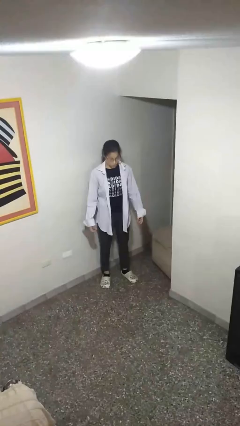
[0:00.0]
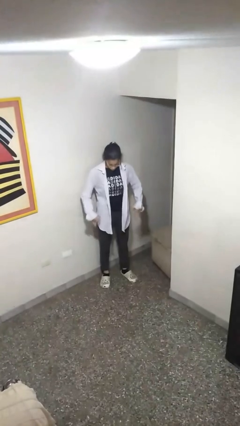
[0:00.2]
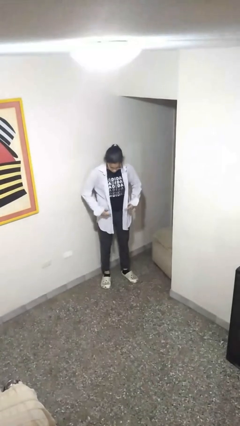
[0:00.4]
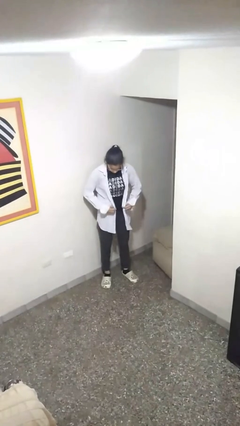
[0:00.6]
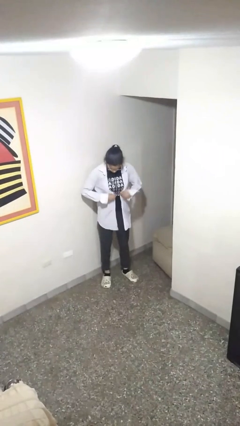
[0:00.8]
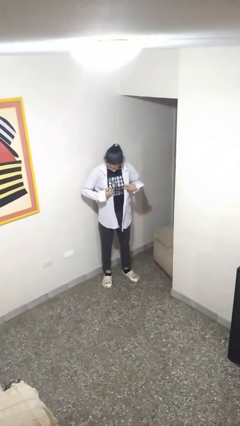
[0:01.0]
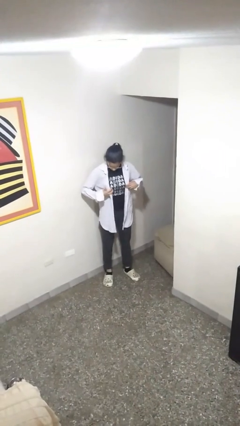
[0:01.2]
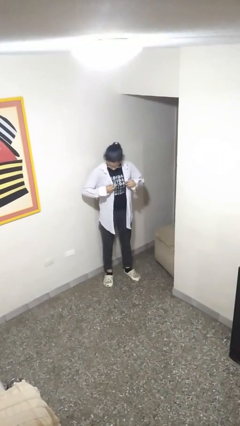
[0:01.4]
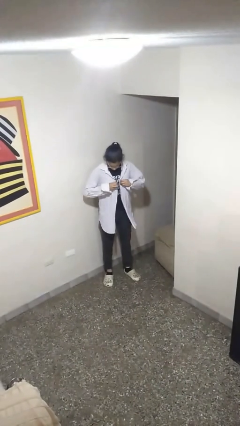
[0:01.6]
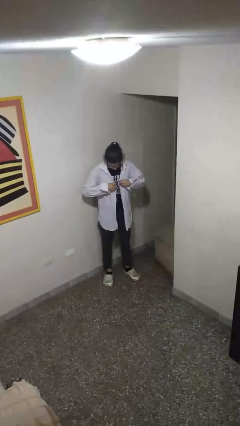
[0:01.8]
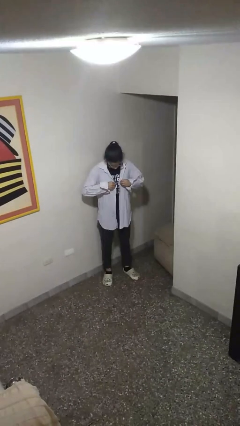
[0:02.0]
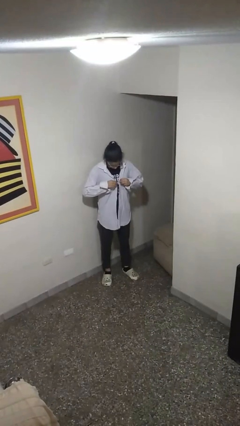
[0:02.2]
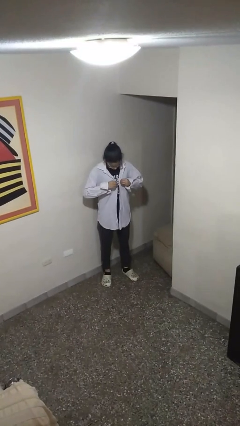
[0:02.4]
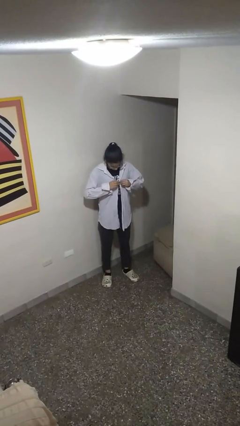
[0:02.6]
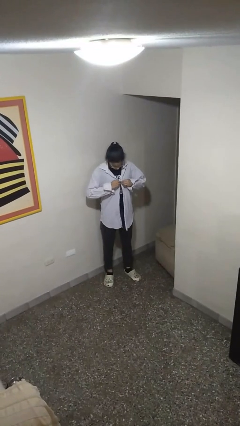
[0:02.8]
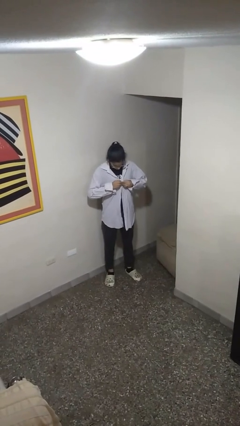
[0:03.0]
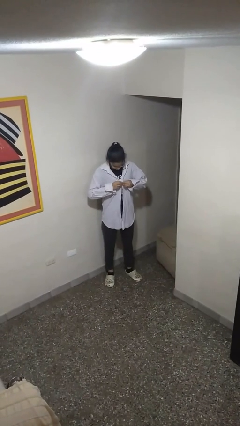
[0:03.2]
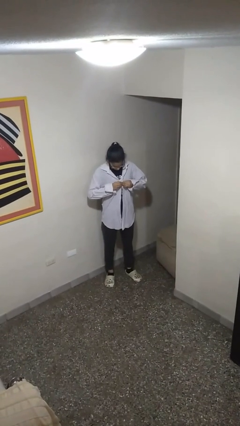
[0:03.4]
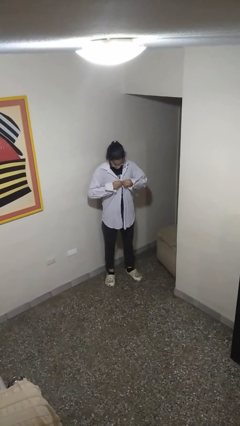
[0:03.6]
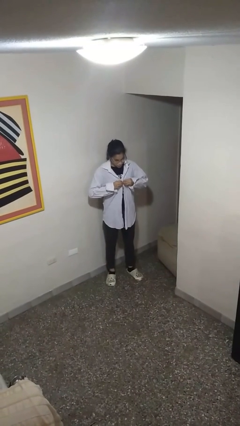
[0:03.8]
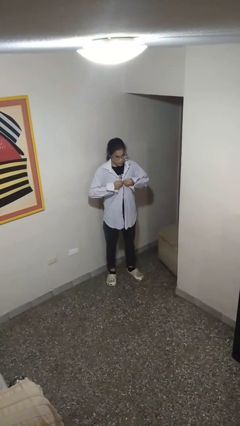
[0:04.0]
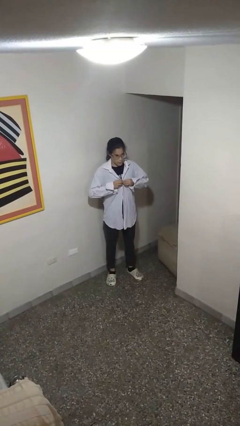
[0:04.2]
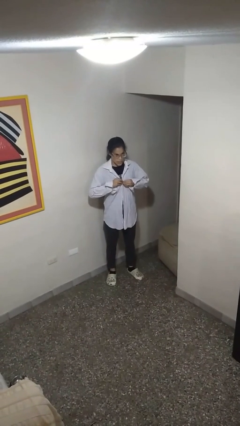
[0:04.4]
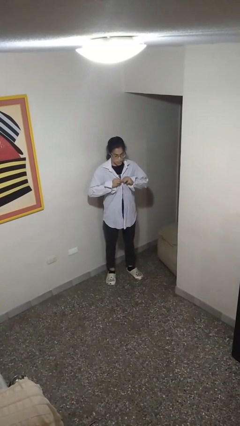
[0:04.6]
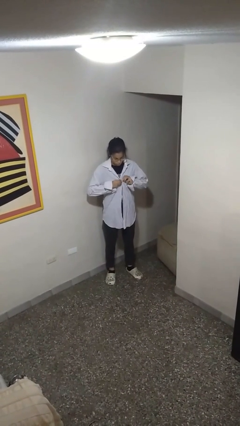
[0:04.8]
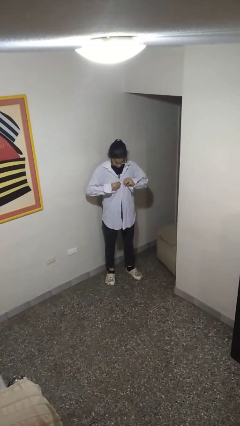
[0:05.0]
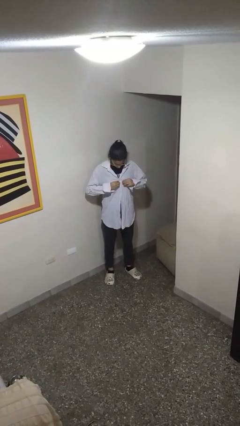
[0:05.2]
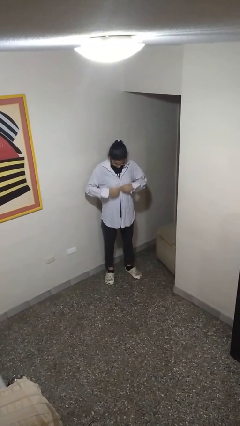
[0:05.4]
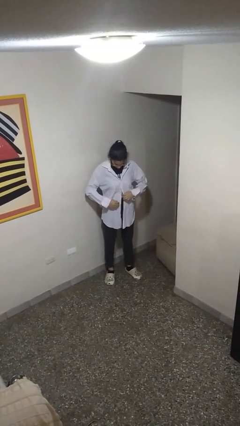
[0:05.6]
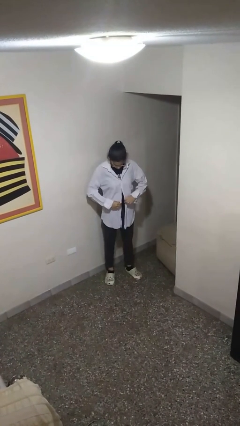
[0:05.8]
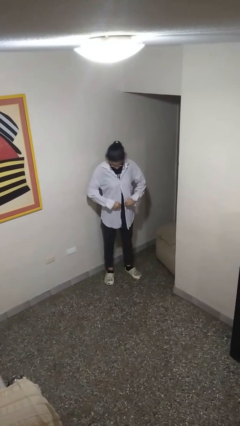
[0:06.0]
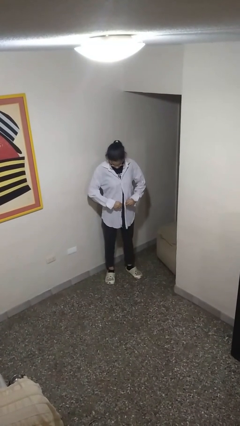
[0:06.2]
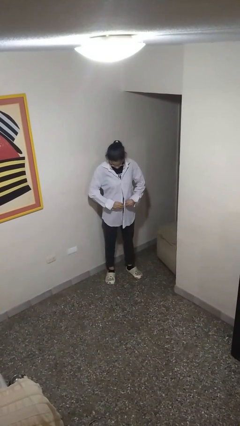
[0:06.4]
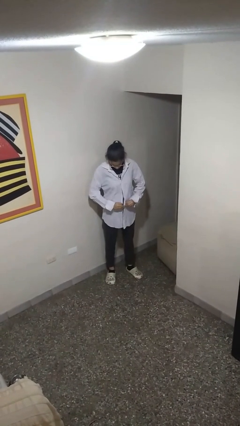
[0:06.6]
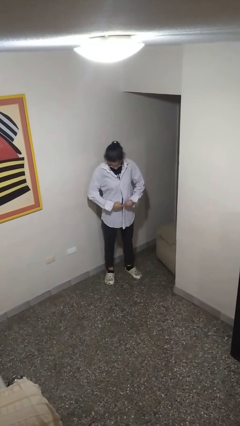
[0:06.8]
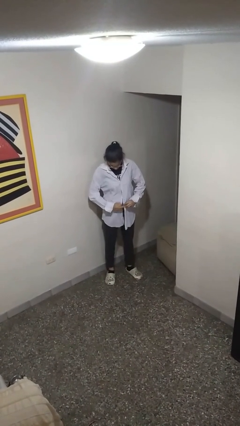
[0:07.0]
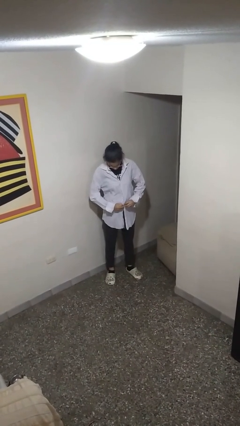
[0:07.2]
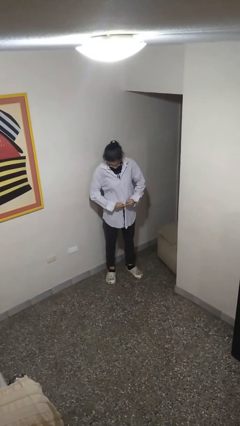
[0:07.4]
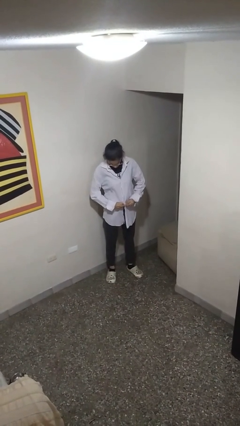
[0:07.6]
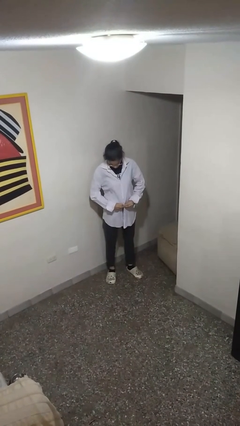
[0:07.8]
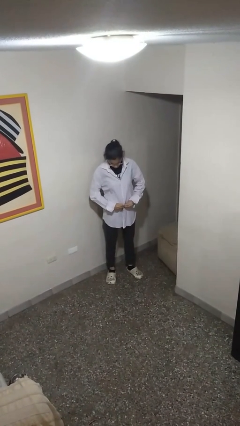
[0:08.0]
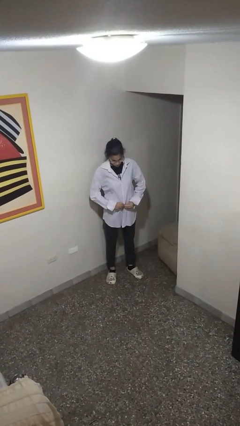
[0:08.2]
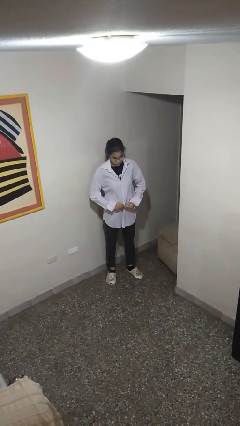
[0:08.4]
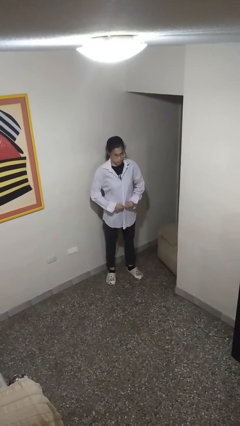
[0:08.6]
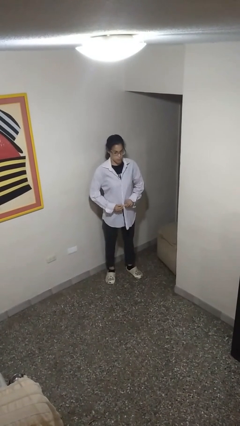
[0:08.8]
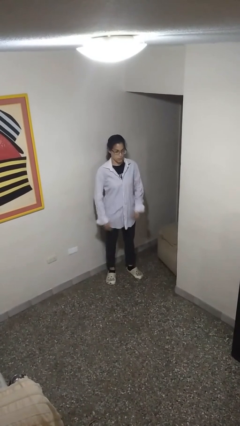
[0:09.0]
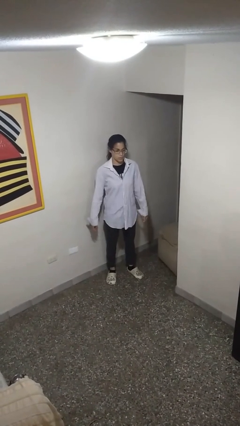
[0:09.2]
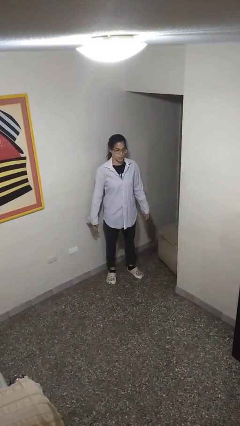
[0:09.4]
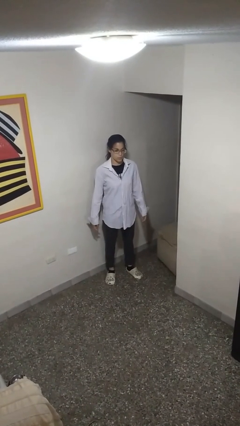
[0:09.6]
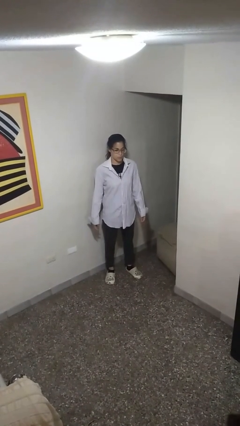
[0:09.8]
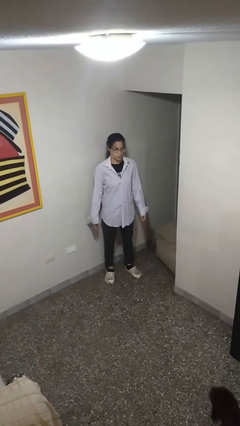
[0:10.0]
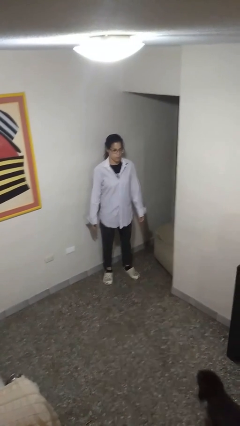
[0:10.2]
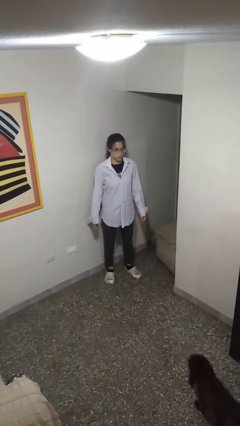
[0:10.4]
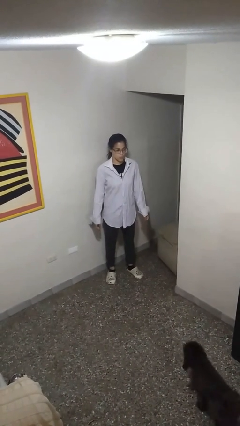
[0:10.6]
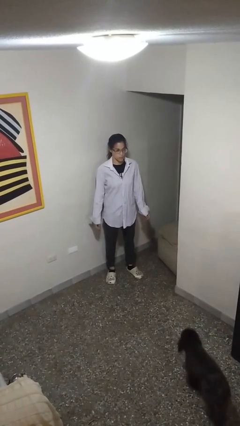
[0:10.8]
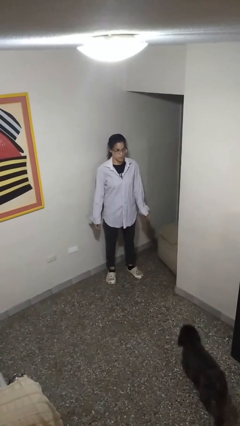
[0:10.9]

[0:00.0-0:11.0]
person buttons shirt

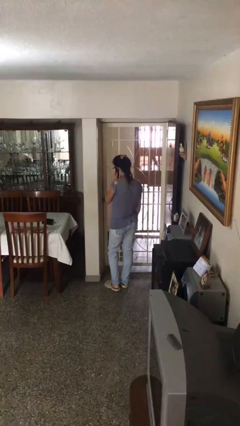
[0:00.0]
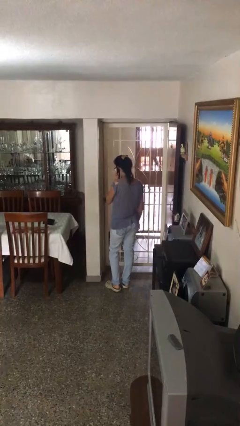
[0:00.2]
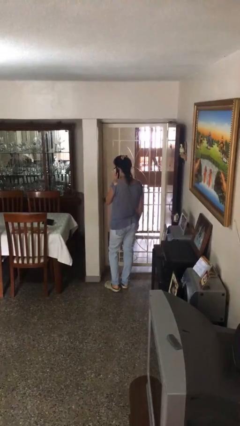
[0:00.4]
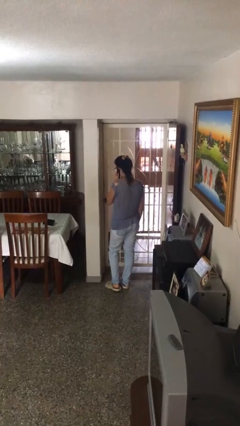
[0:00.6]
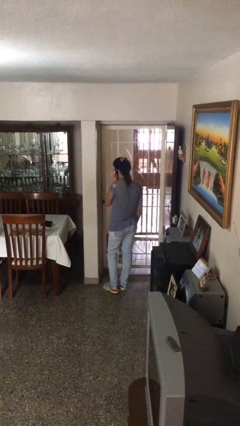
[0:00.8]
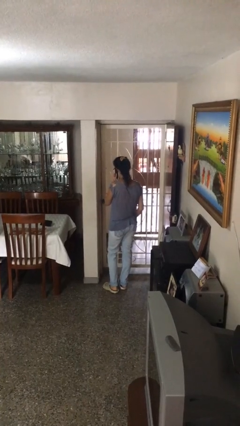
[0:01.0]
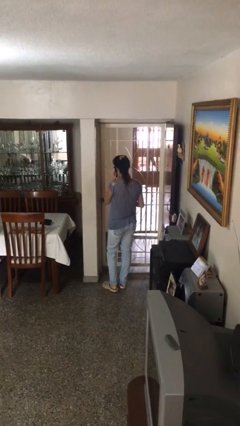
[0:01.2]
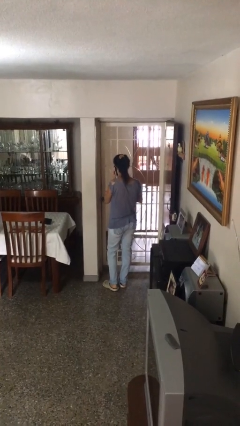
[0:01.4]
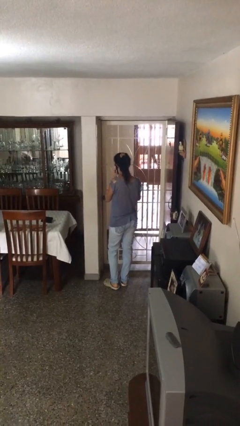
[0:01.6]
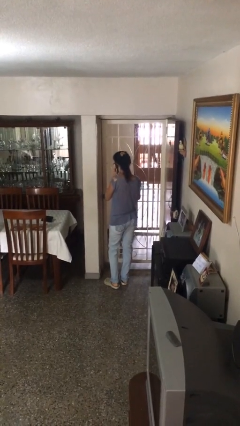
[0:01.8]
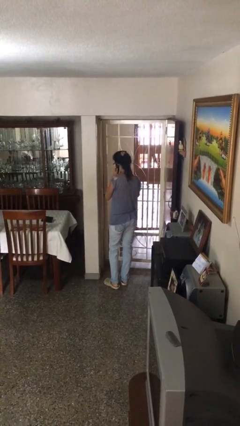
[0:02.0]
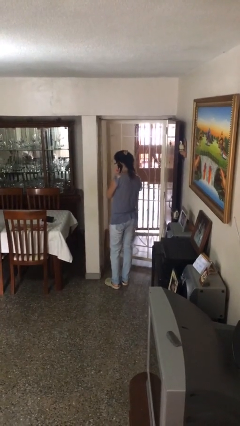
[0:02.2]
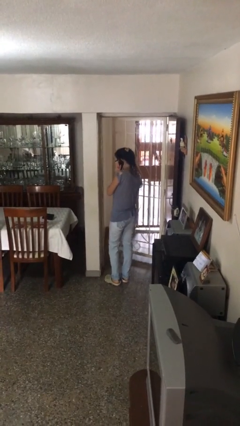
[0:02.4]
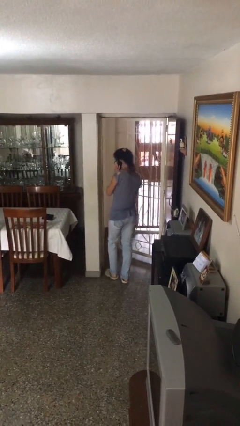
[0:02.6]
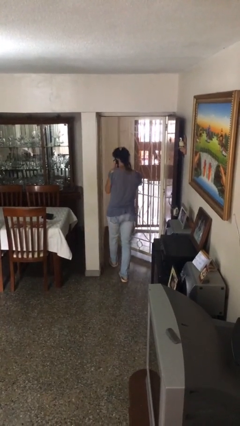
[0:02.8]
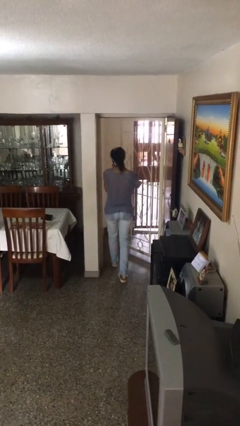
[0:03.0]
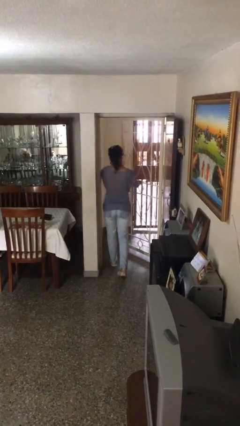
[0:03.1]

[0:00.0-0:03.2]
person opens facility door

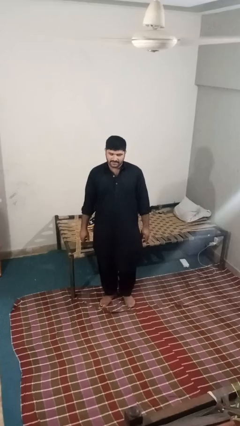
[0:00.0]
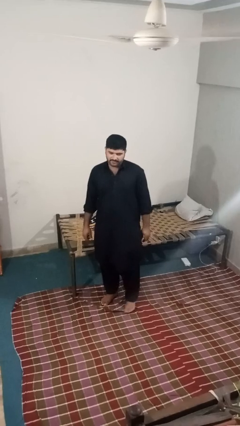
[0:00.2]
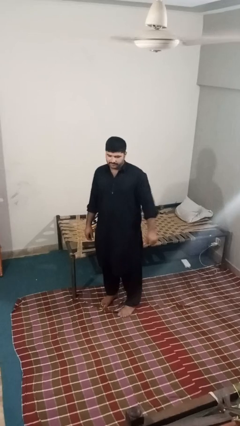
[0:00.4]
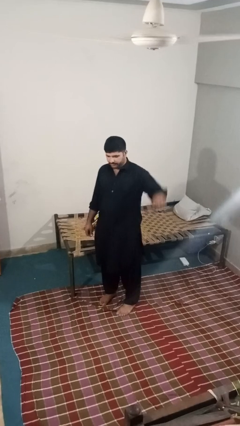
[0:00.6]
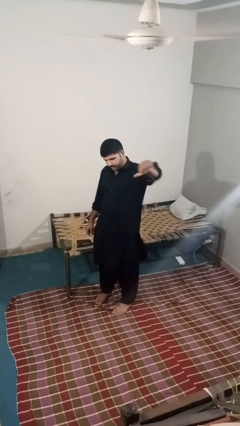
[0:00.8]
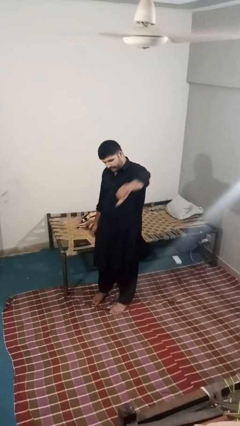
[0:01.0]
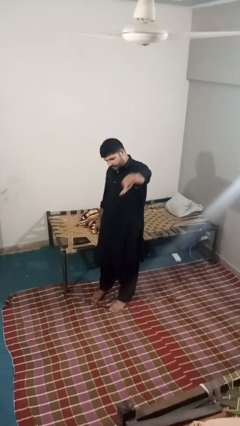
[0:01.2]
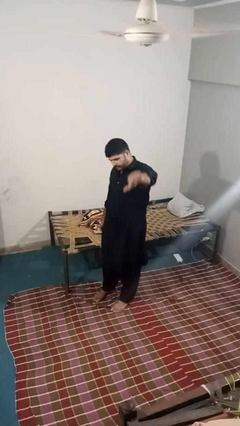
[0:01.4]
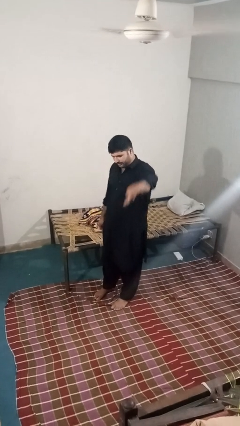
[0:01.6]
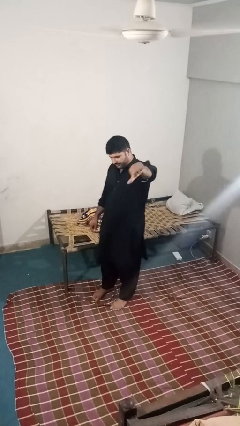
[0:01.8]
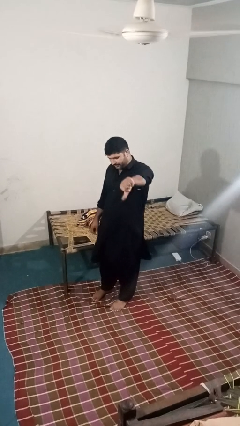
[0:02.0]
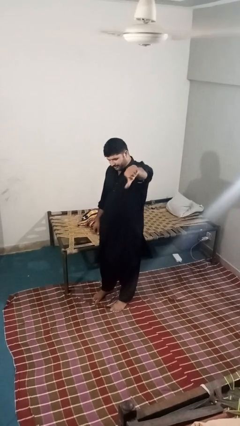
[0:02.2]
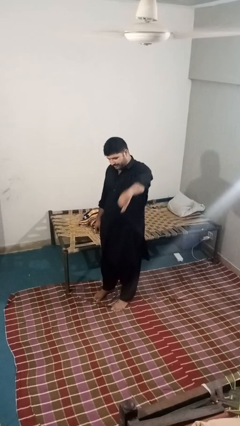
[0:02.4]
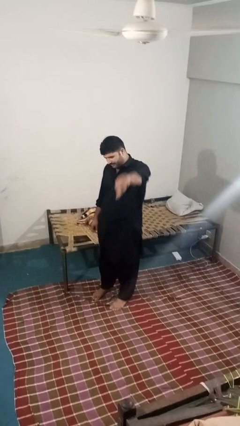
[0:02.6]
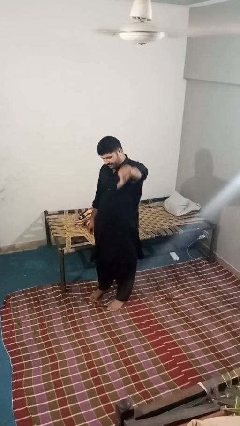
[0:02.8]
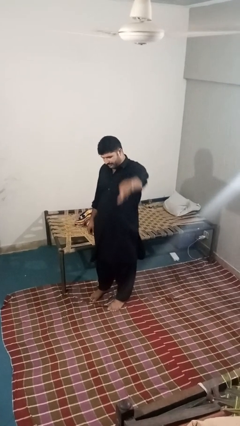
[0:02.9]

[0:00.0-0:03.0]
person gestures thumbs down

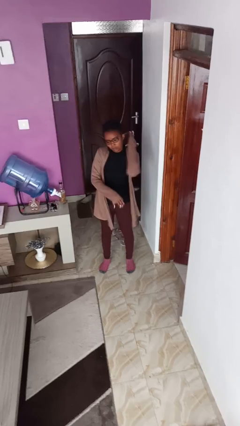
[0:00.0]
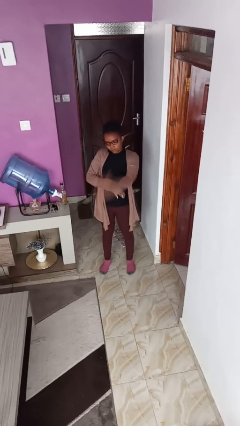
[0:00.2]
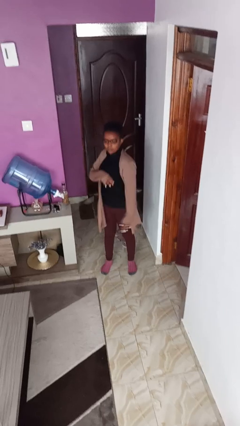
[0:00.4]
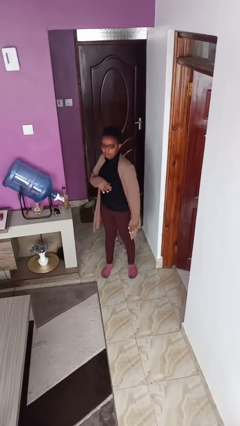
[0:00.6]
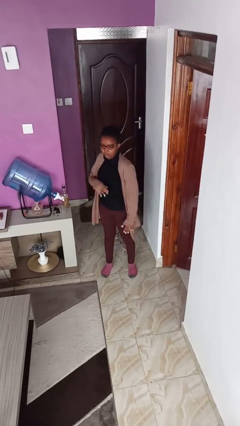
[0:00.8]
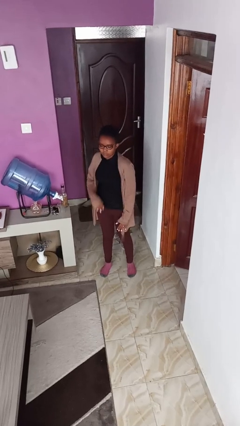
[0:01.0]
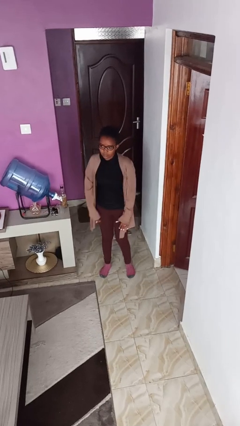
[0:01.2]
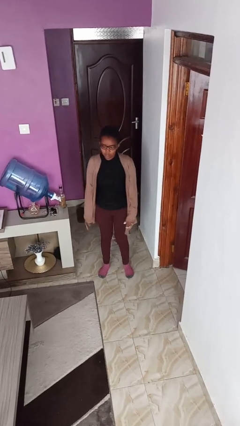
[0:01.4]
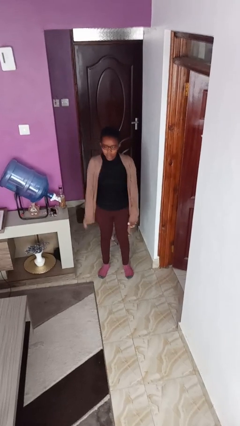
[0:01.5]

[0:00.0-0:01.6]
person karate chop
